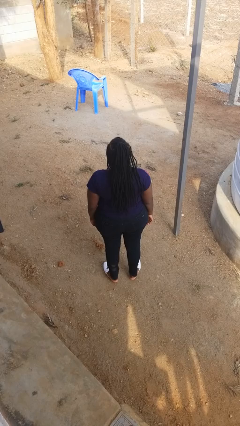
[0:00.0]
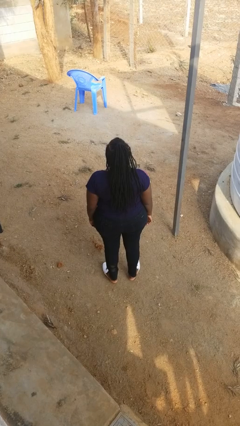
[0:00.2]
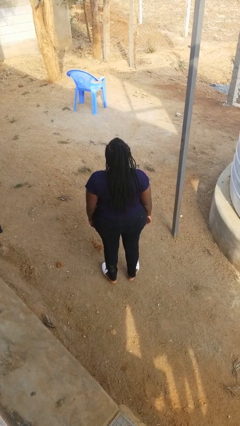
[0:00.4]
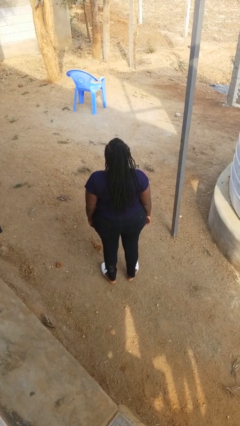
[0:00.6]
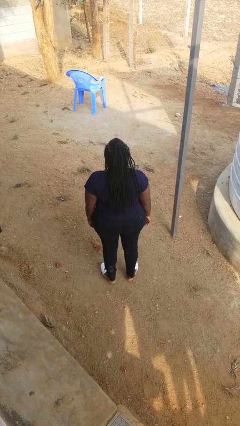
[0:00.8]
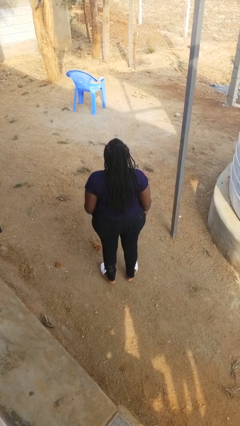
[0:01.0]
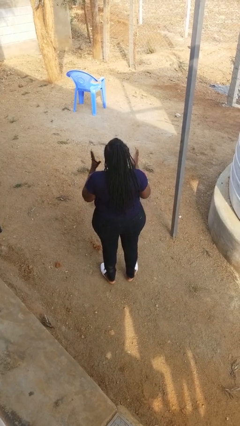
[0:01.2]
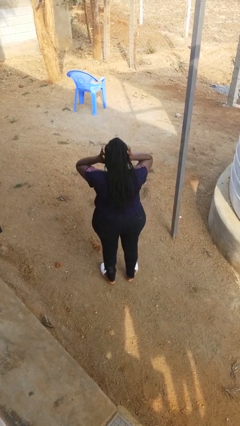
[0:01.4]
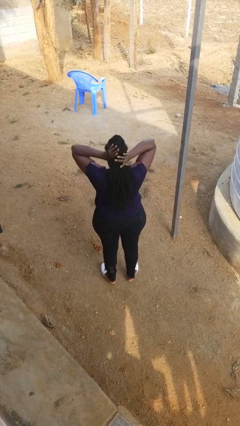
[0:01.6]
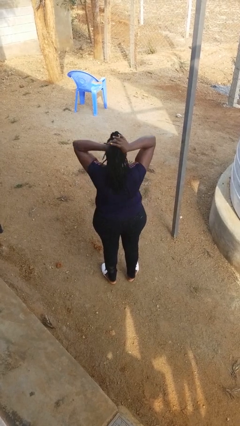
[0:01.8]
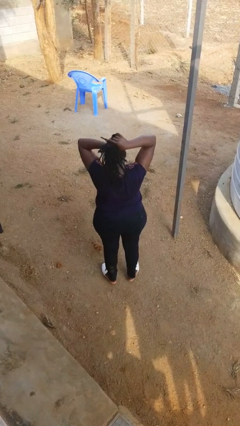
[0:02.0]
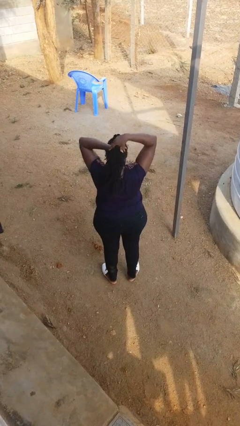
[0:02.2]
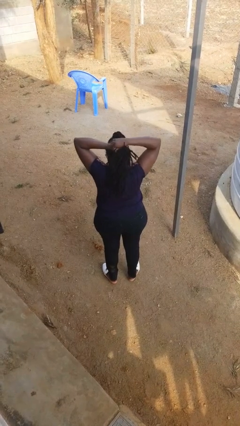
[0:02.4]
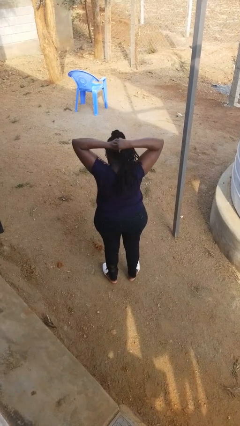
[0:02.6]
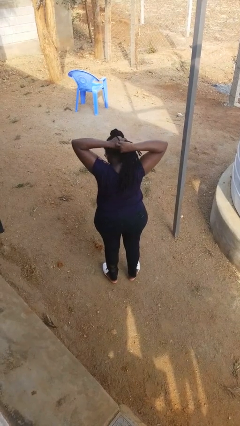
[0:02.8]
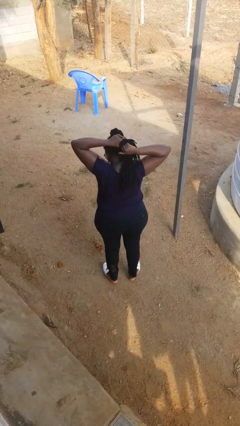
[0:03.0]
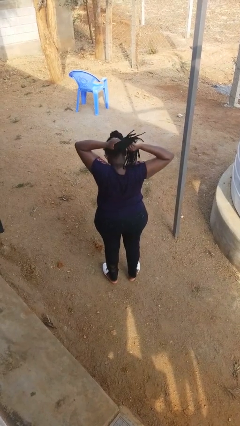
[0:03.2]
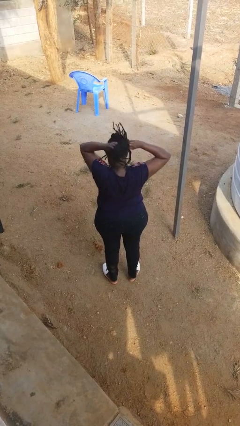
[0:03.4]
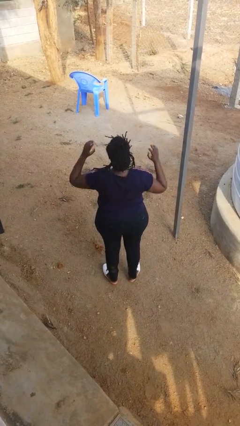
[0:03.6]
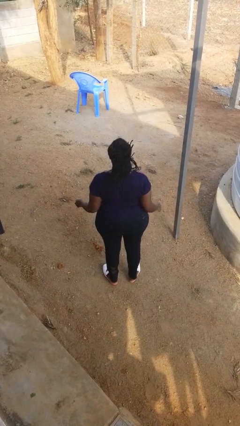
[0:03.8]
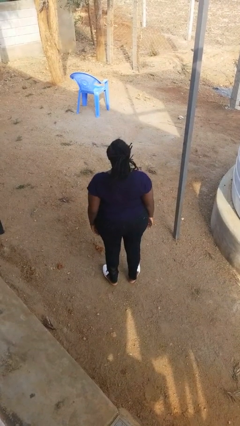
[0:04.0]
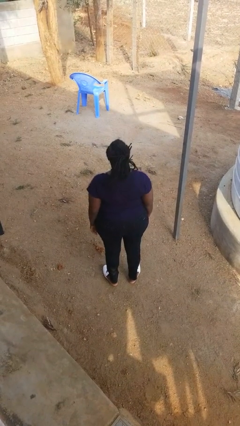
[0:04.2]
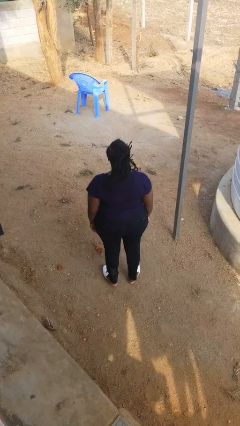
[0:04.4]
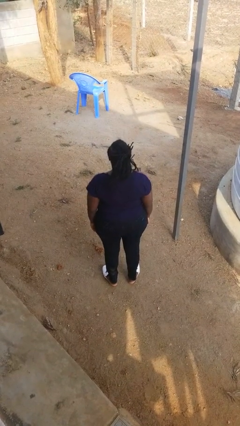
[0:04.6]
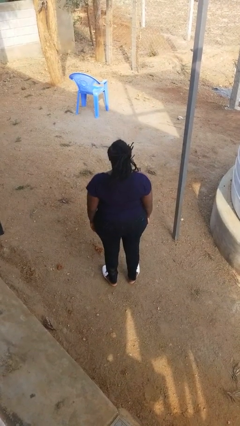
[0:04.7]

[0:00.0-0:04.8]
person puts hair in ponytail

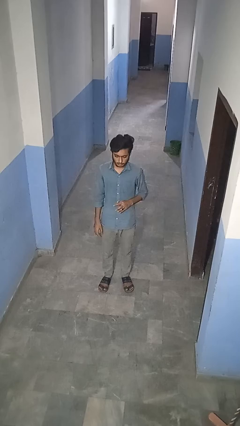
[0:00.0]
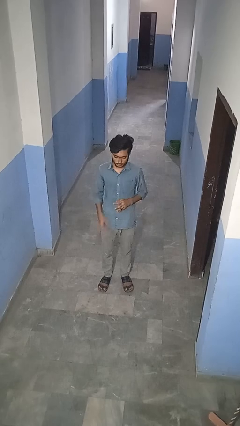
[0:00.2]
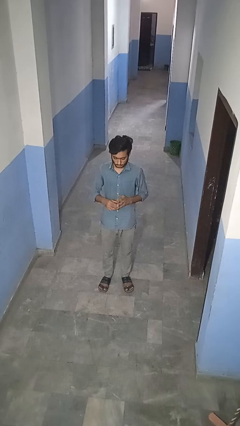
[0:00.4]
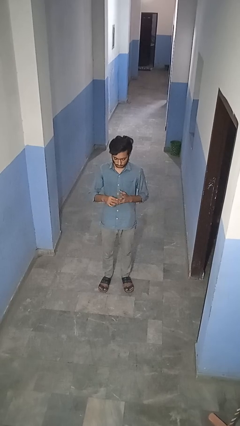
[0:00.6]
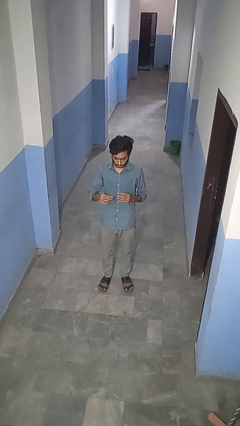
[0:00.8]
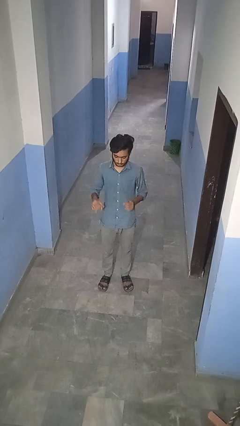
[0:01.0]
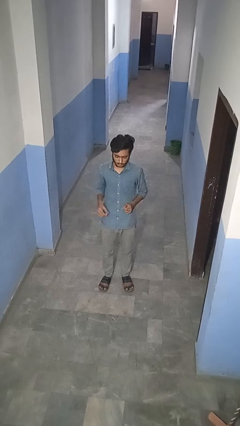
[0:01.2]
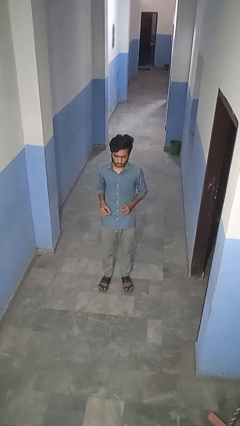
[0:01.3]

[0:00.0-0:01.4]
person takes off ring

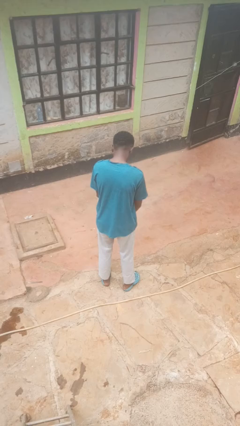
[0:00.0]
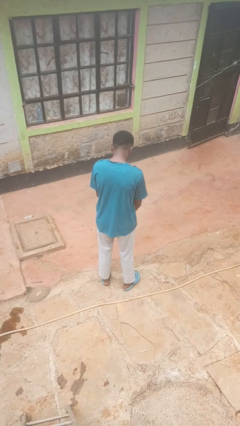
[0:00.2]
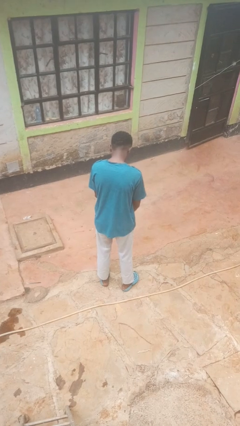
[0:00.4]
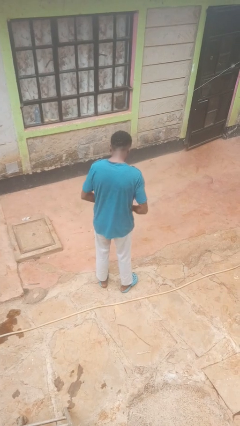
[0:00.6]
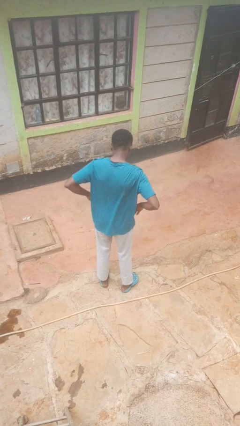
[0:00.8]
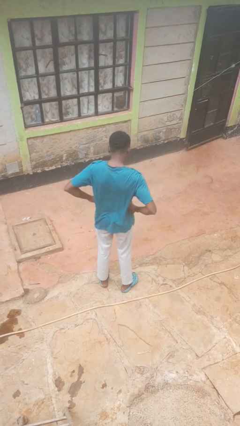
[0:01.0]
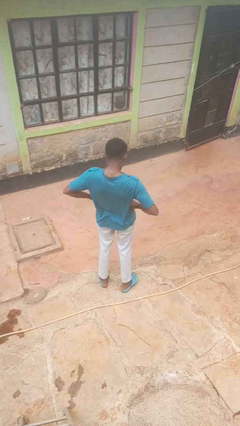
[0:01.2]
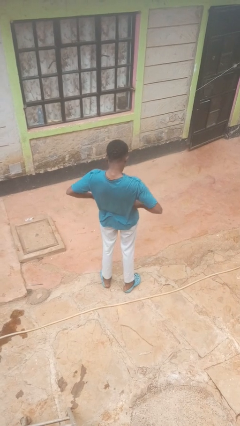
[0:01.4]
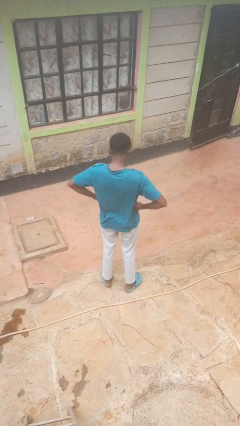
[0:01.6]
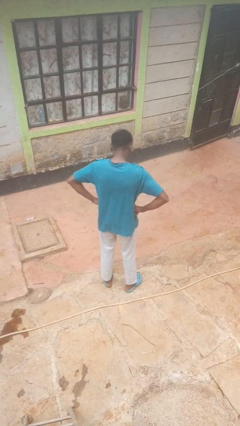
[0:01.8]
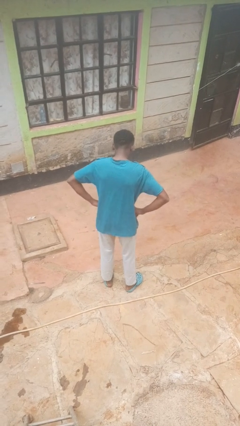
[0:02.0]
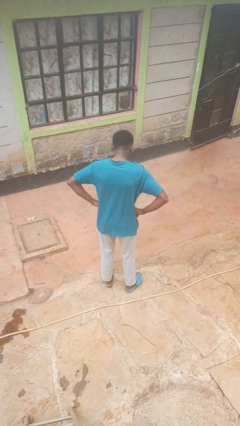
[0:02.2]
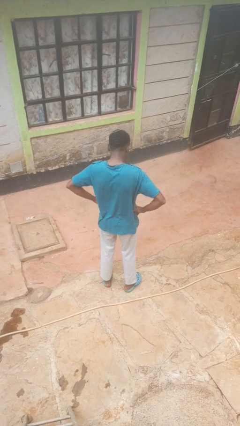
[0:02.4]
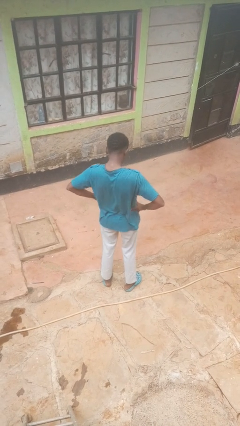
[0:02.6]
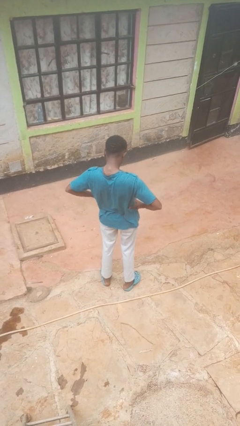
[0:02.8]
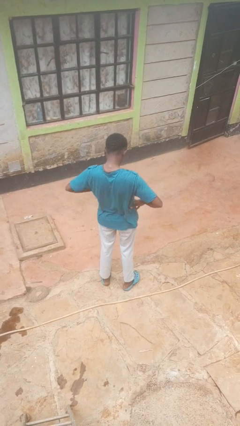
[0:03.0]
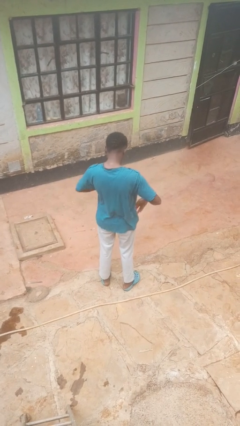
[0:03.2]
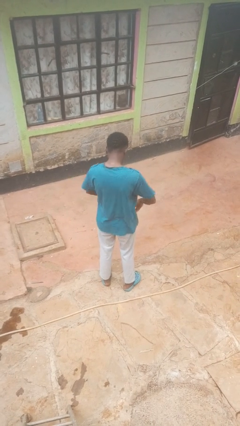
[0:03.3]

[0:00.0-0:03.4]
person wiggles hips

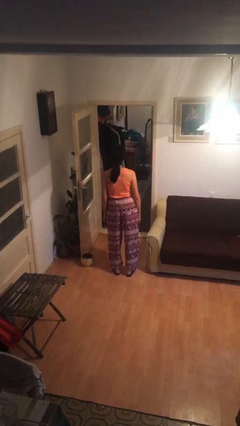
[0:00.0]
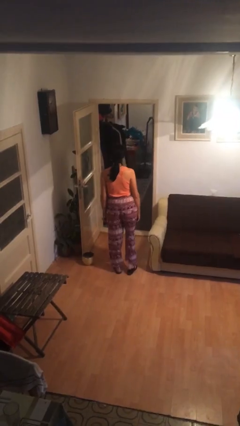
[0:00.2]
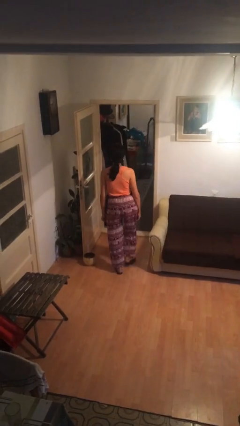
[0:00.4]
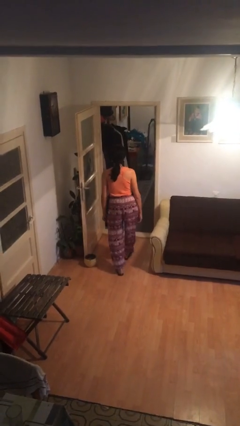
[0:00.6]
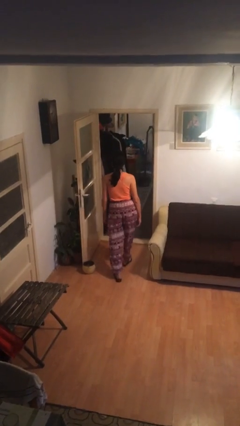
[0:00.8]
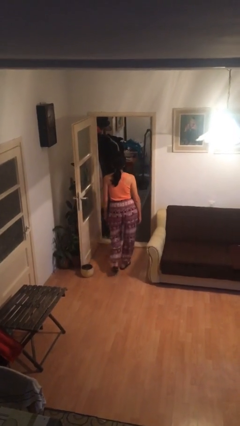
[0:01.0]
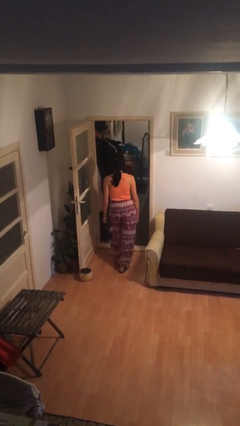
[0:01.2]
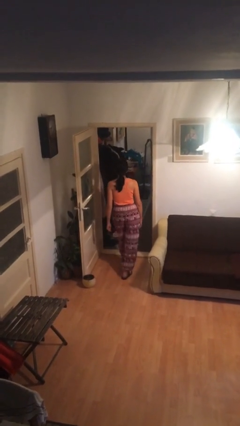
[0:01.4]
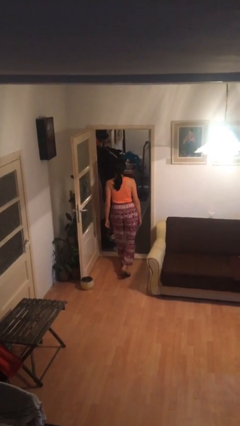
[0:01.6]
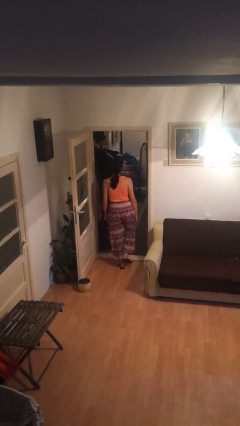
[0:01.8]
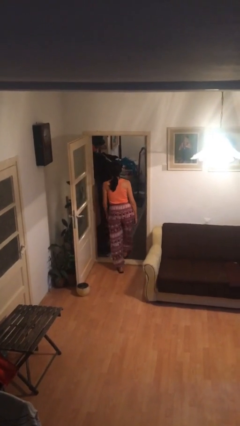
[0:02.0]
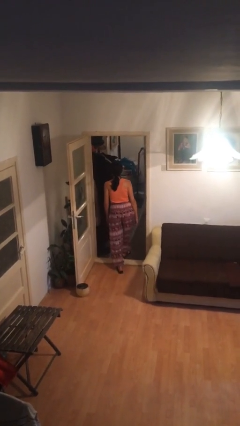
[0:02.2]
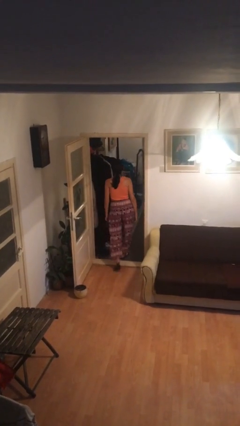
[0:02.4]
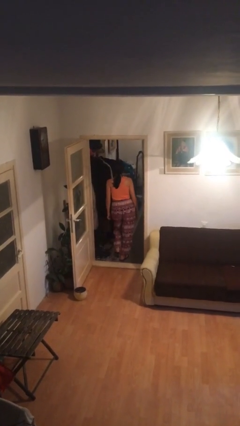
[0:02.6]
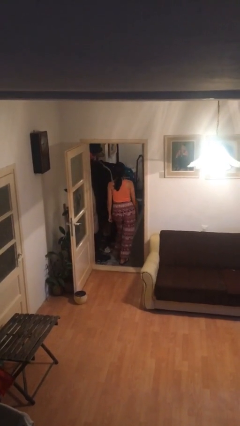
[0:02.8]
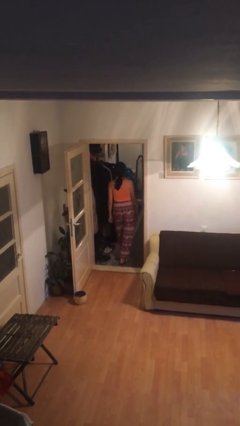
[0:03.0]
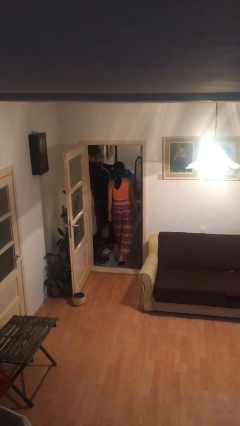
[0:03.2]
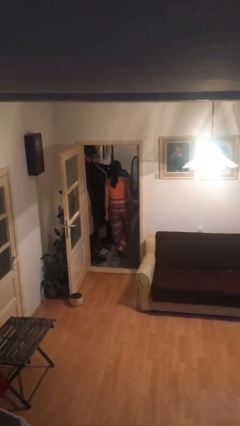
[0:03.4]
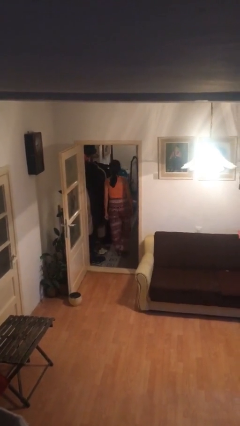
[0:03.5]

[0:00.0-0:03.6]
person exits scene through structure

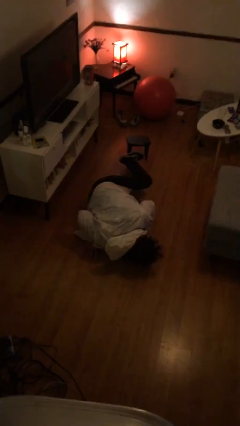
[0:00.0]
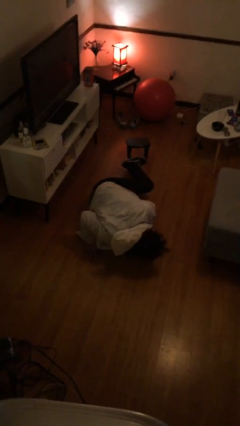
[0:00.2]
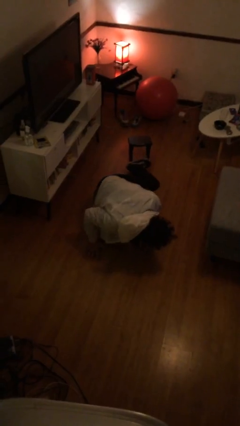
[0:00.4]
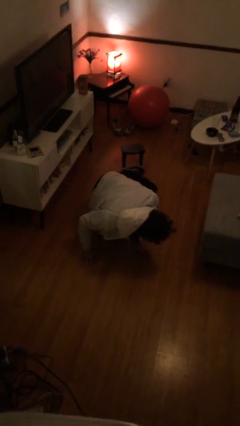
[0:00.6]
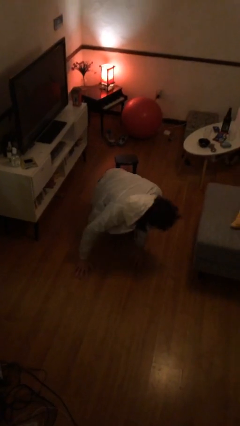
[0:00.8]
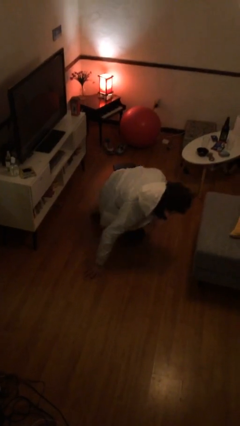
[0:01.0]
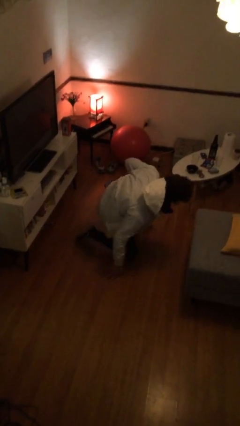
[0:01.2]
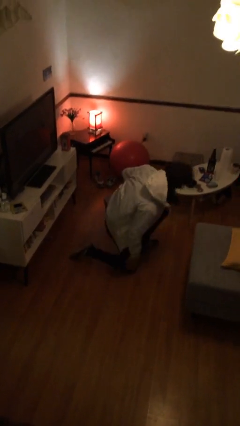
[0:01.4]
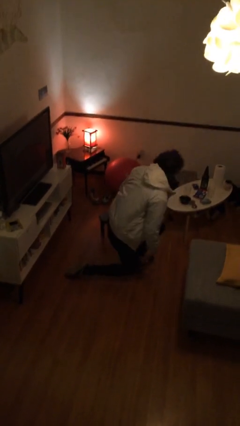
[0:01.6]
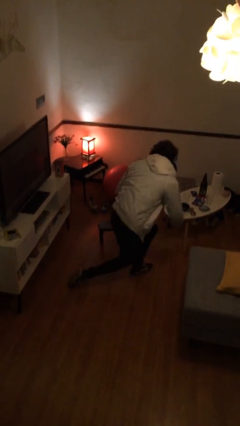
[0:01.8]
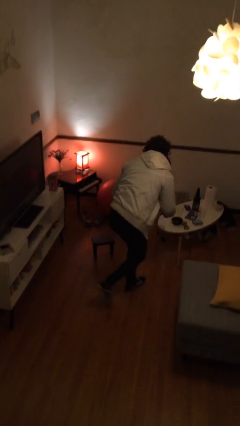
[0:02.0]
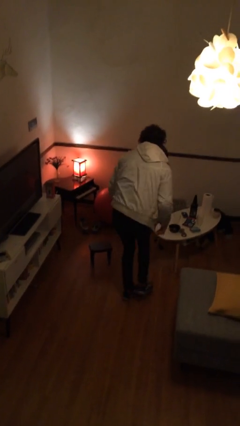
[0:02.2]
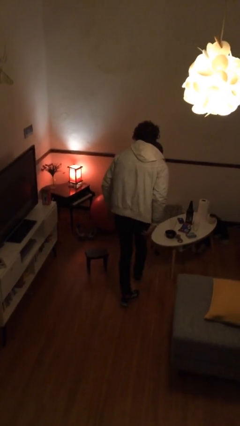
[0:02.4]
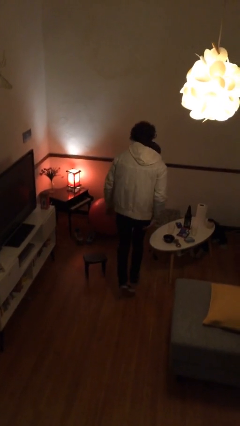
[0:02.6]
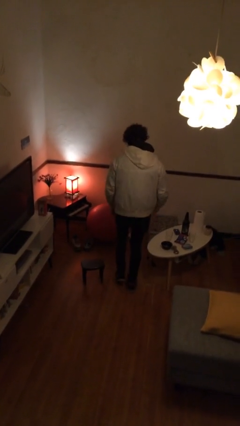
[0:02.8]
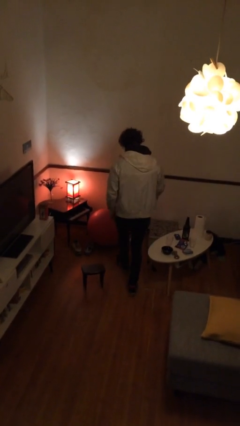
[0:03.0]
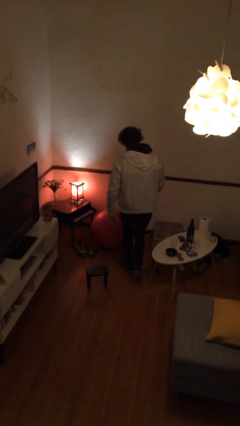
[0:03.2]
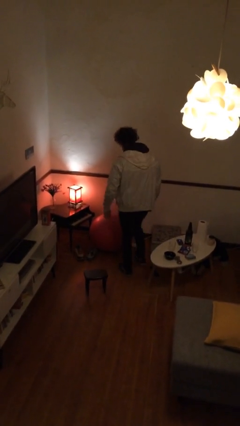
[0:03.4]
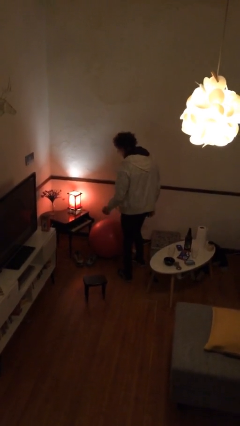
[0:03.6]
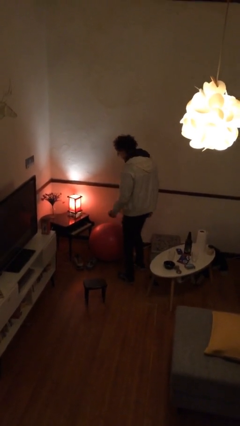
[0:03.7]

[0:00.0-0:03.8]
person stands up from floor

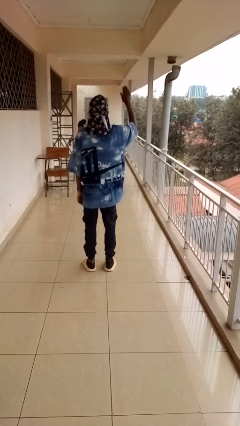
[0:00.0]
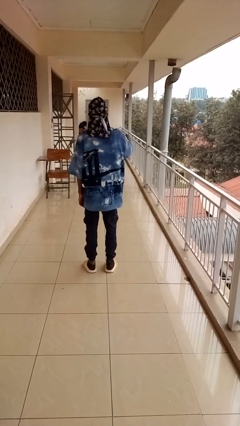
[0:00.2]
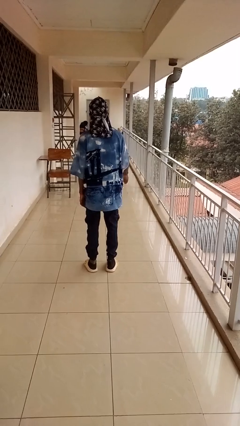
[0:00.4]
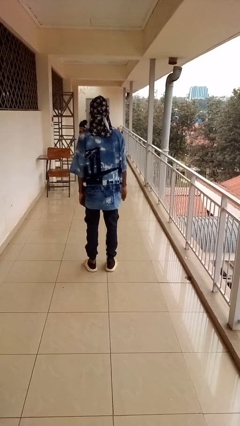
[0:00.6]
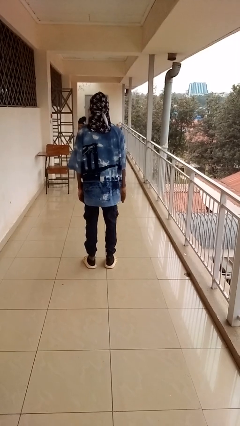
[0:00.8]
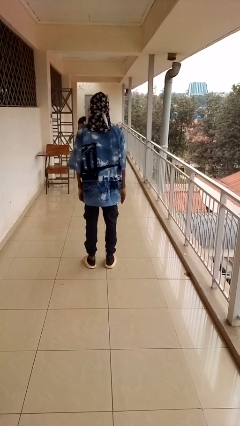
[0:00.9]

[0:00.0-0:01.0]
person gestures lower hand
